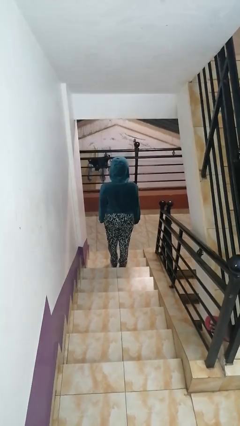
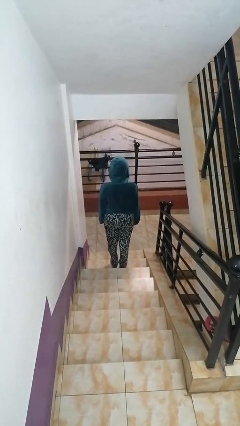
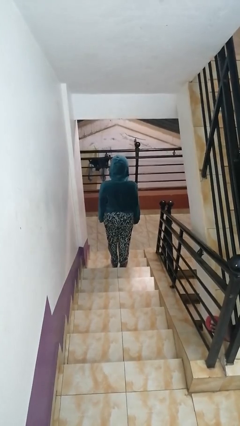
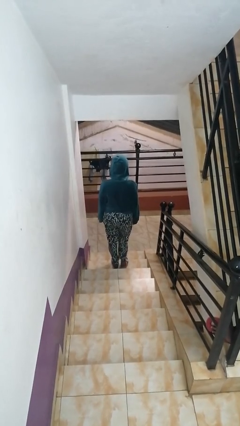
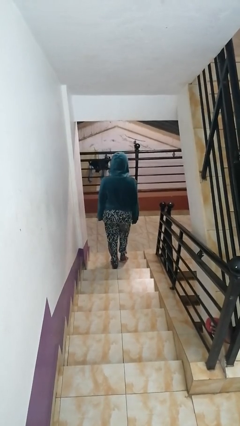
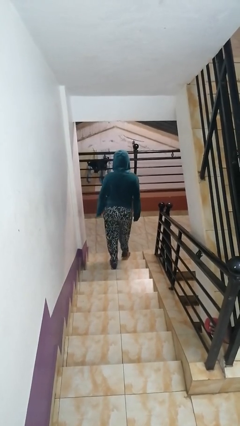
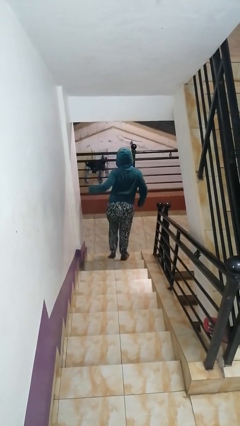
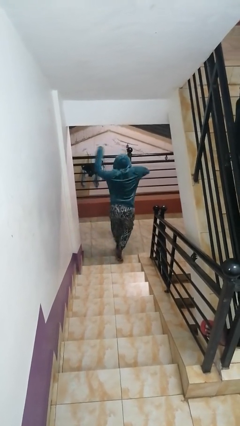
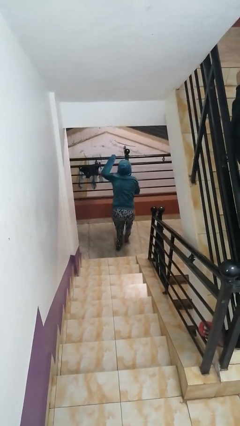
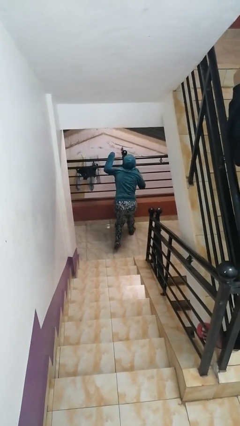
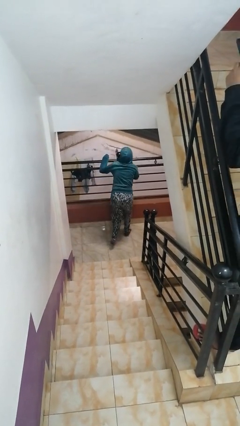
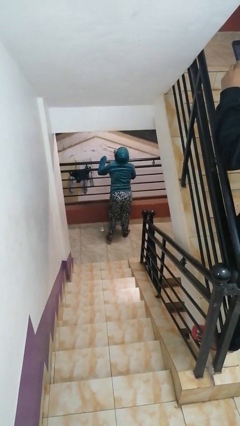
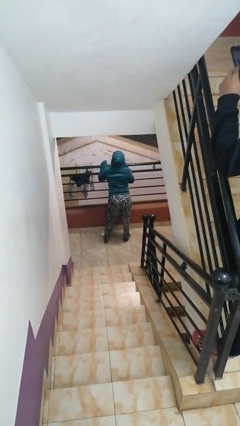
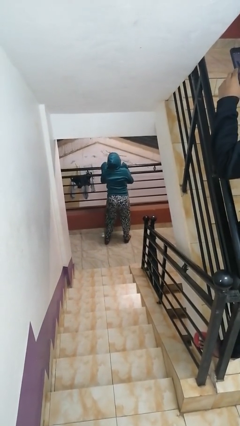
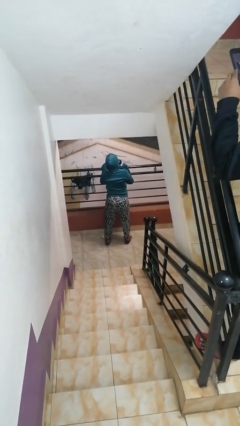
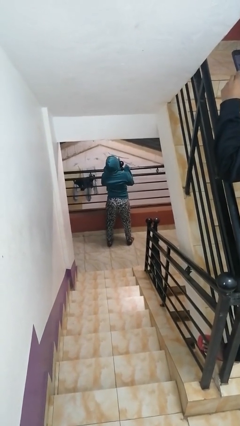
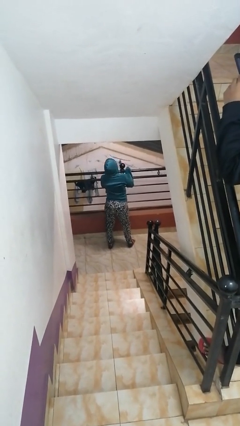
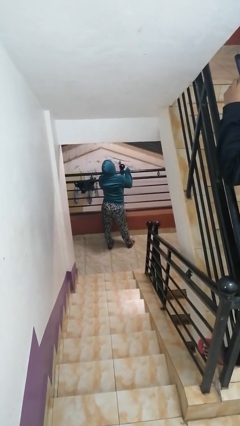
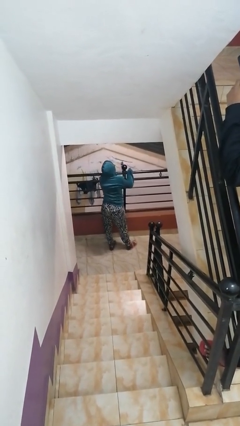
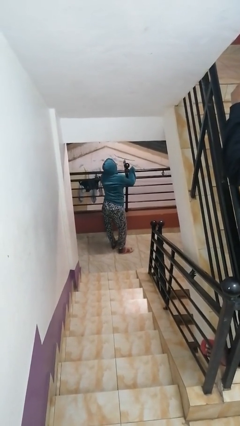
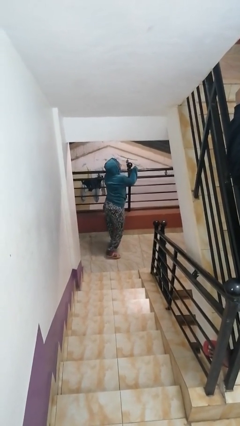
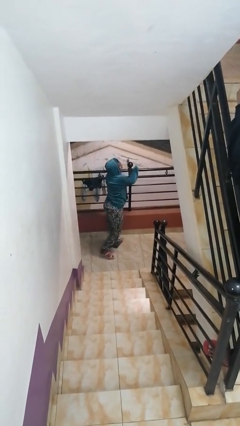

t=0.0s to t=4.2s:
person trips on stair

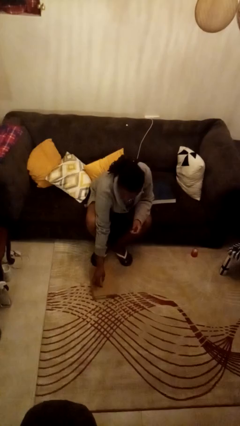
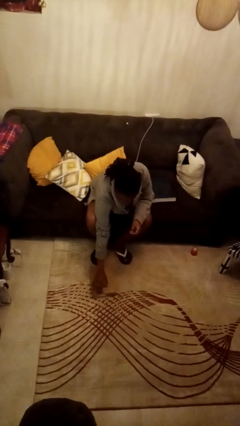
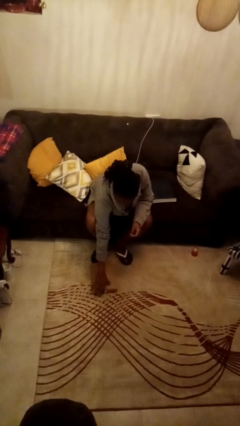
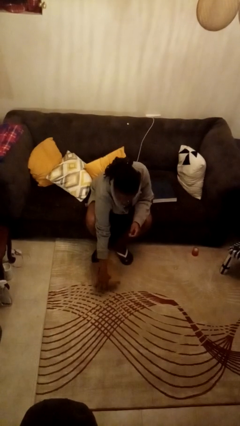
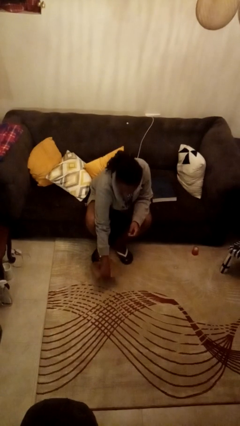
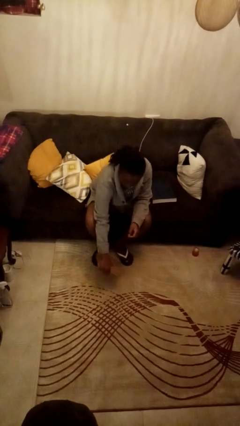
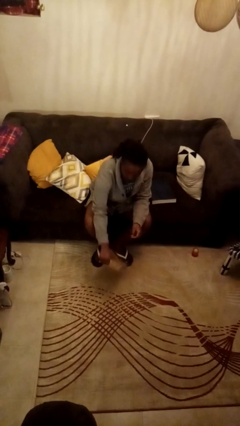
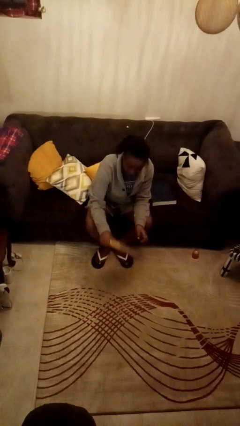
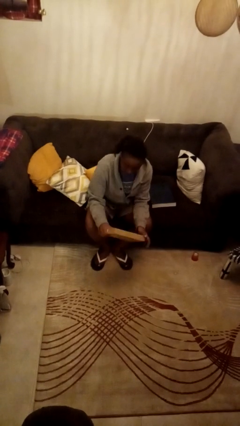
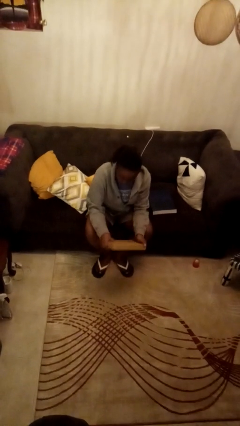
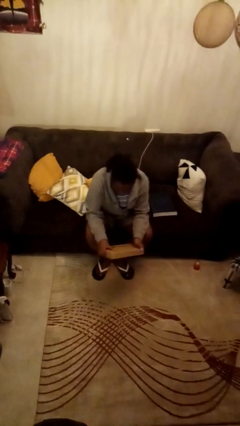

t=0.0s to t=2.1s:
person picks up object from floor

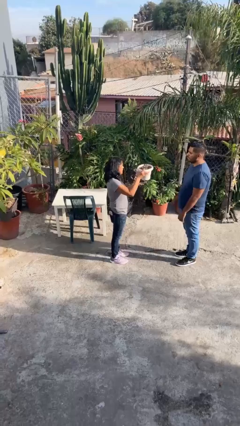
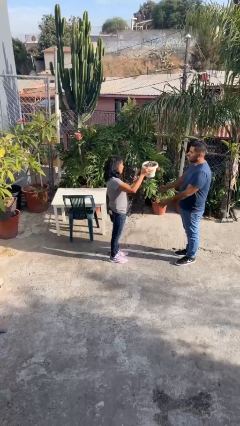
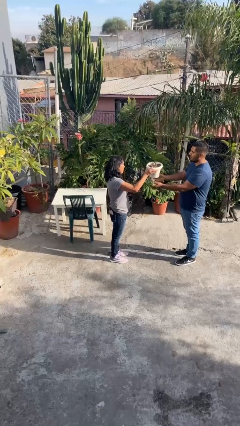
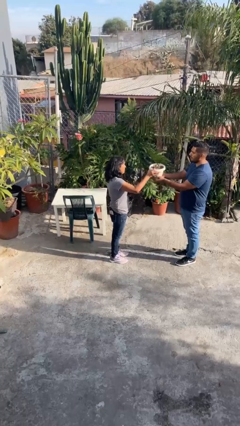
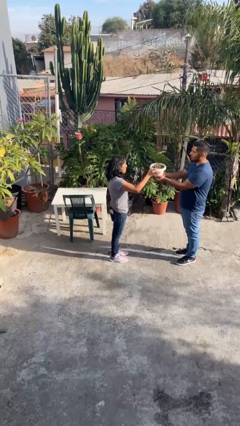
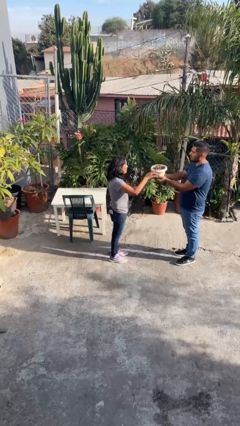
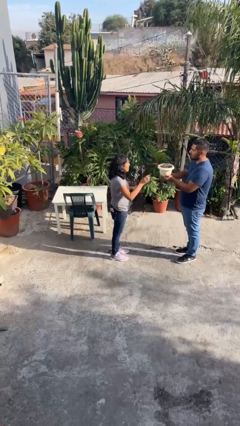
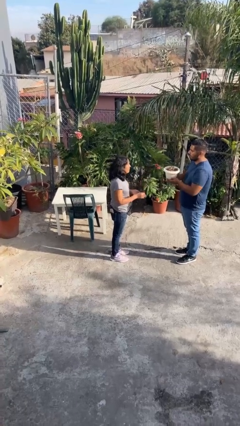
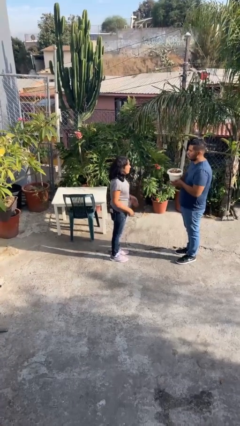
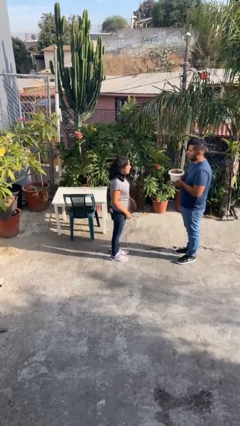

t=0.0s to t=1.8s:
person transfers object to person

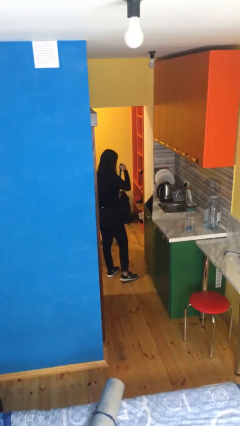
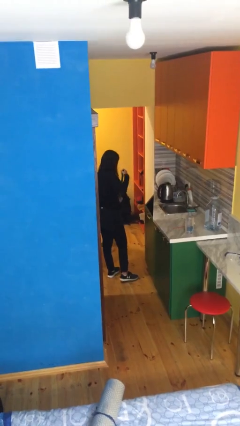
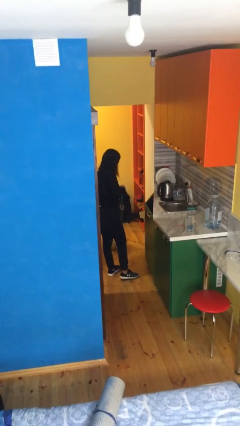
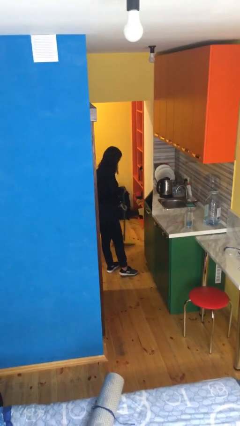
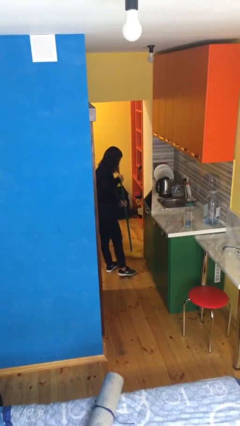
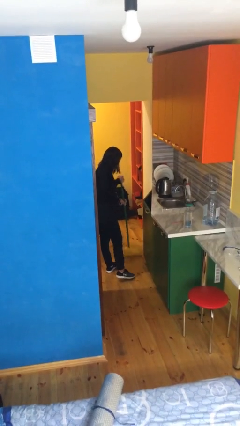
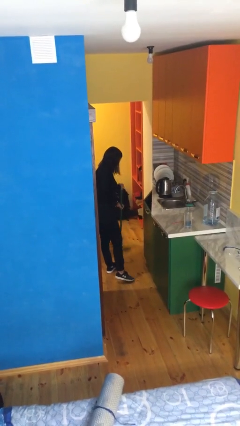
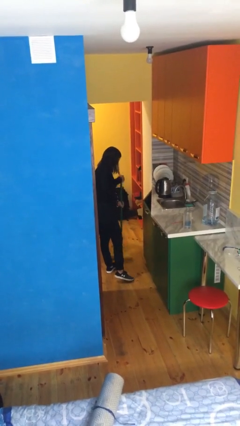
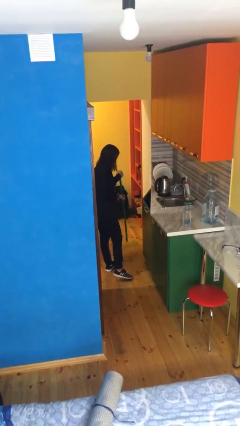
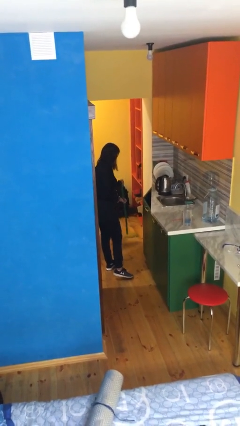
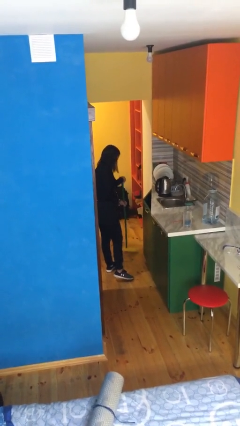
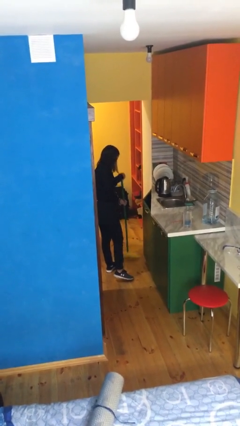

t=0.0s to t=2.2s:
person sweeps floor

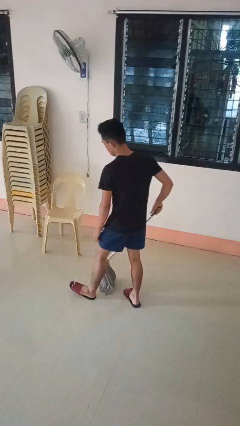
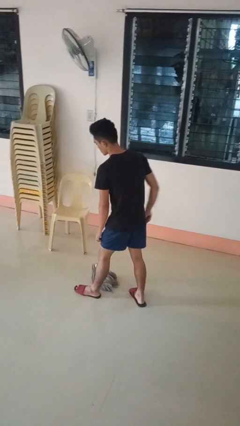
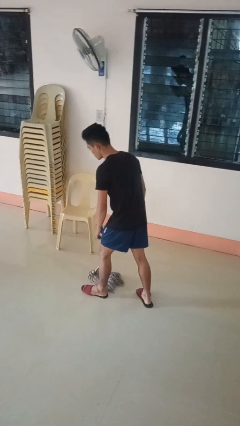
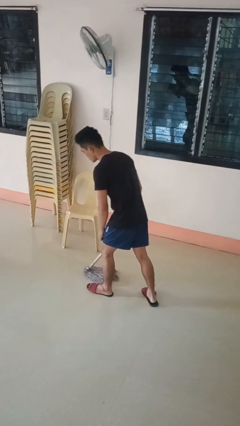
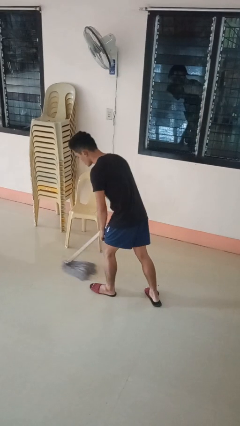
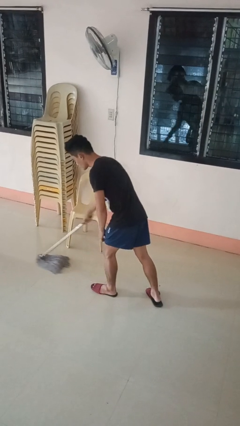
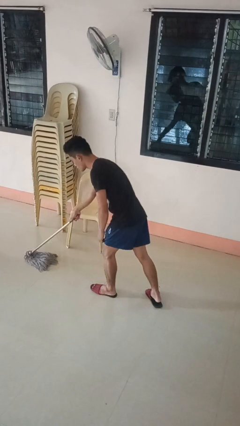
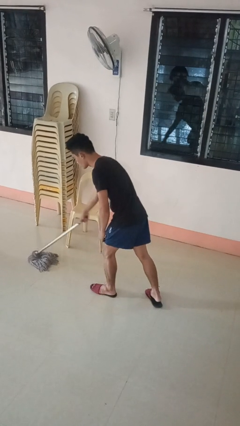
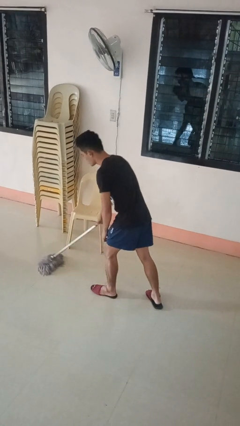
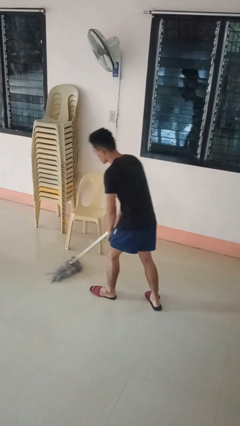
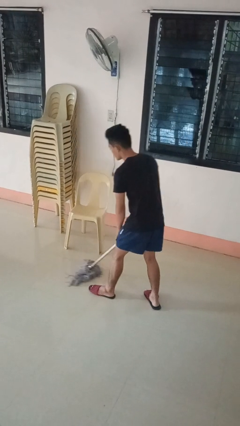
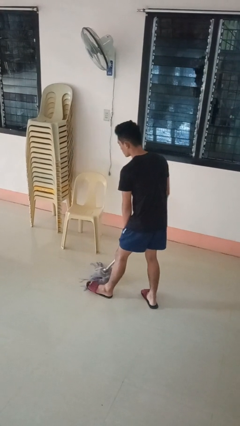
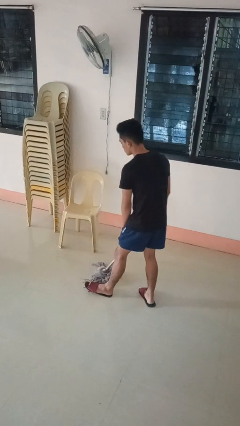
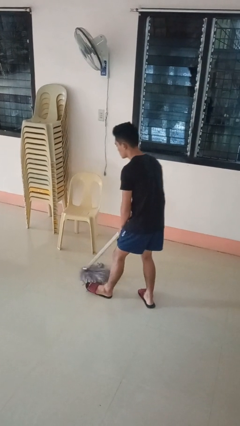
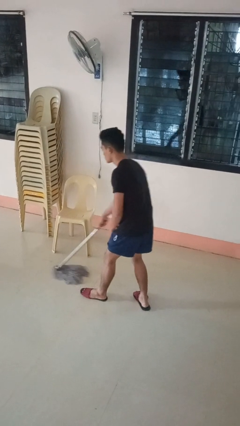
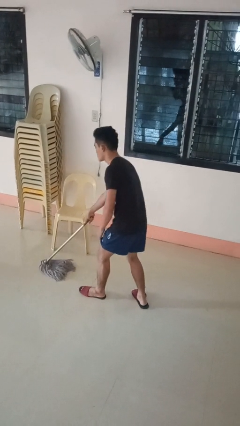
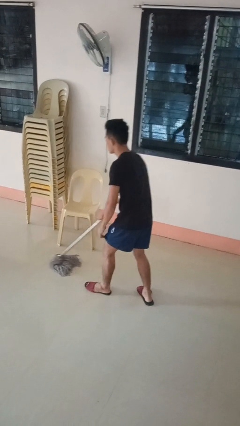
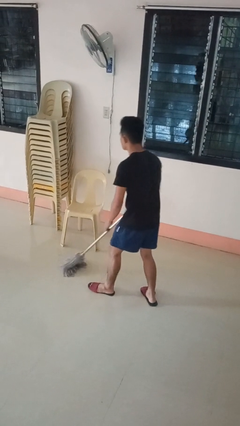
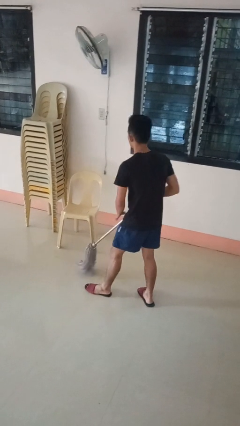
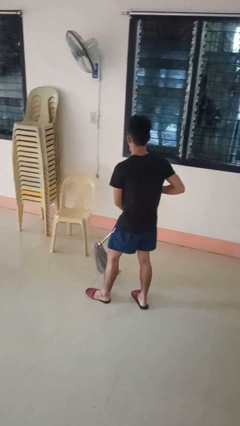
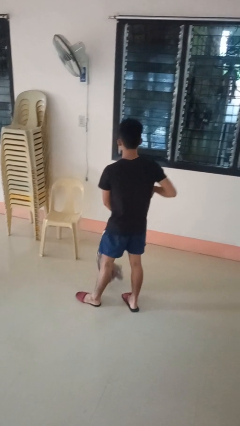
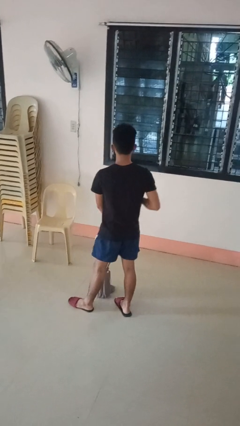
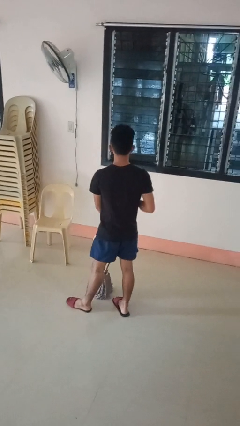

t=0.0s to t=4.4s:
person mops

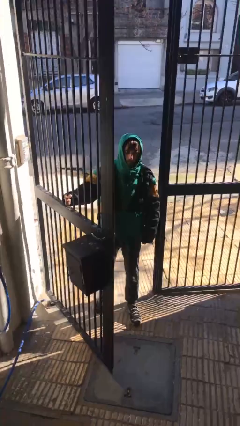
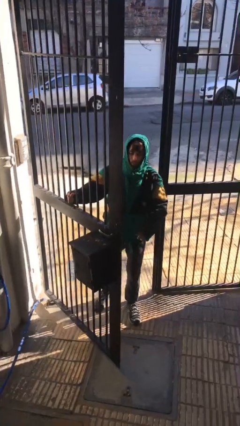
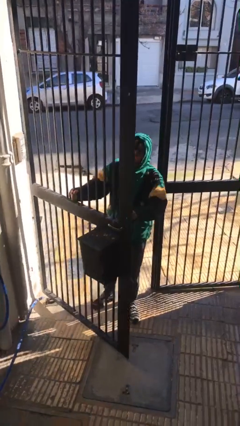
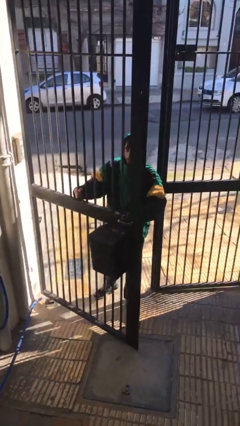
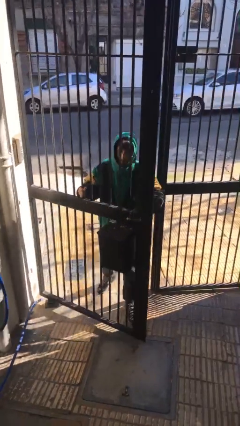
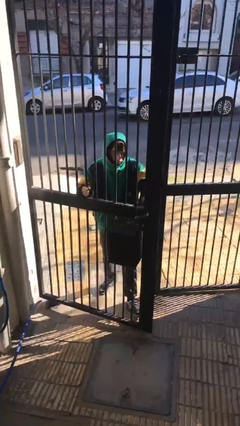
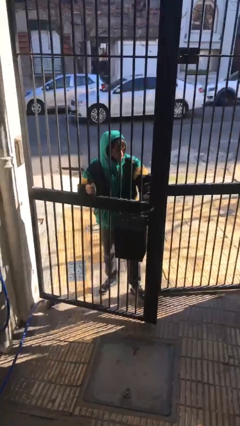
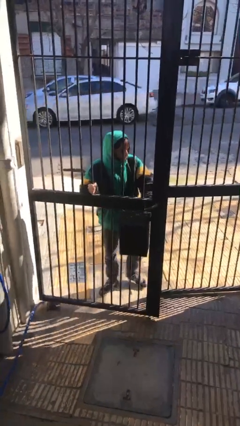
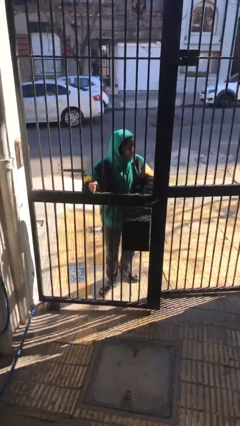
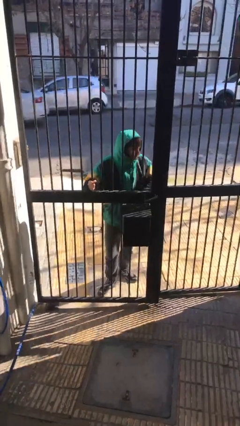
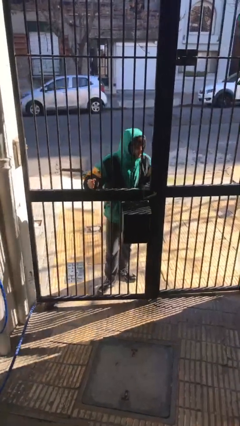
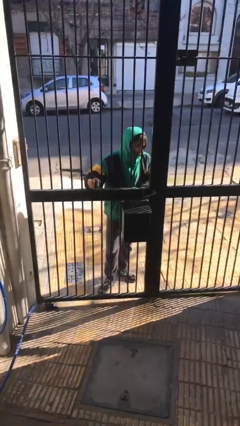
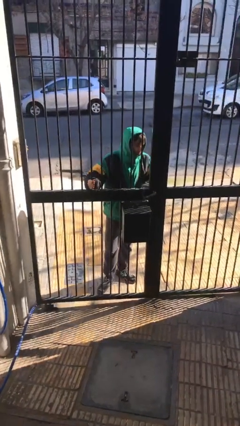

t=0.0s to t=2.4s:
person closes gate

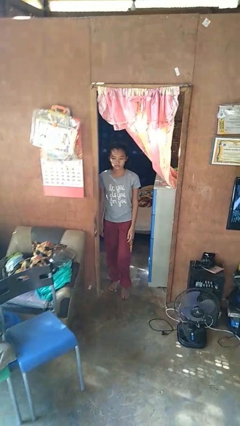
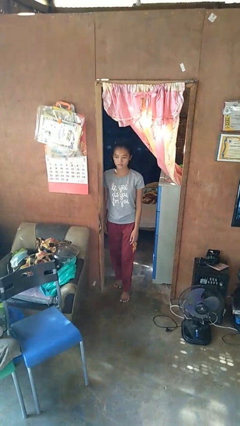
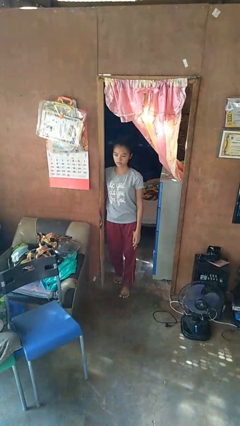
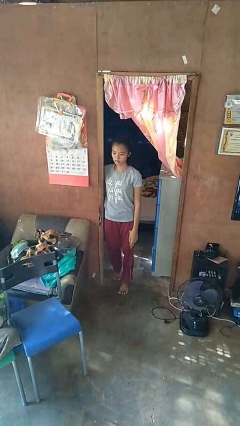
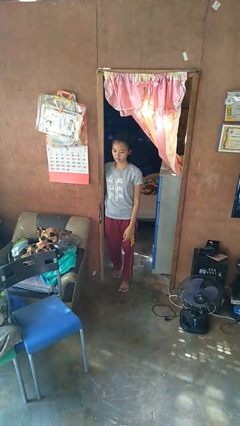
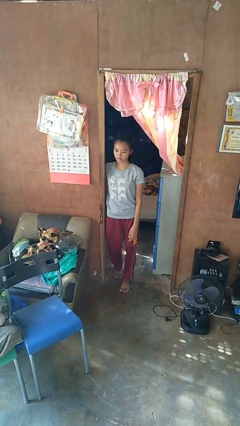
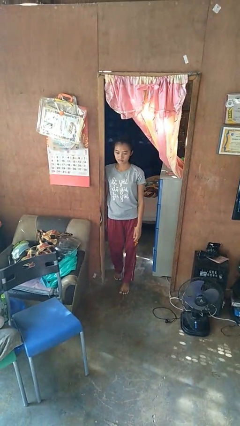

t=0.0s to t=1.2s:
person bumps into wall
